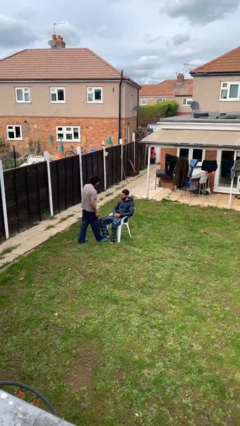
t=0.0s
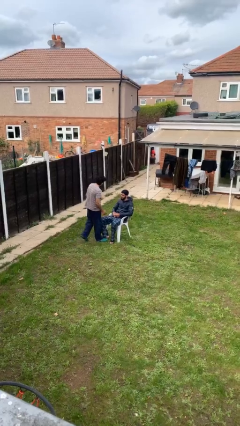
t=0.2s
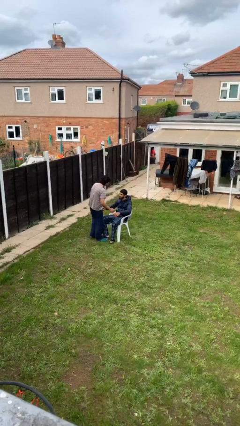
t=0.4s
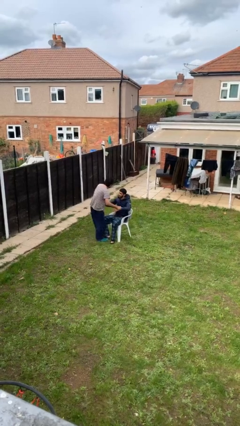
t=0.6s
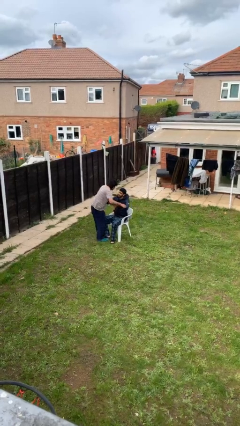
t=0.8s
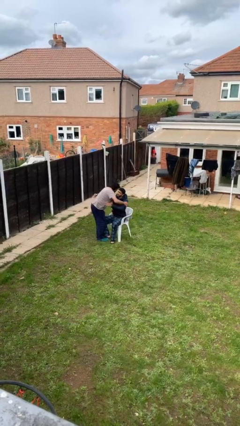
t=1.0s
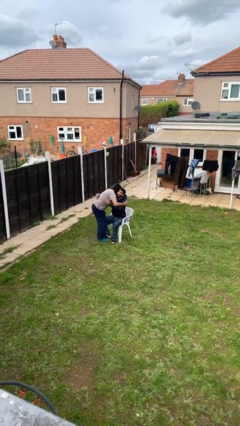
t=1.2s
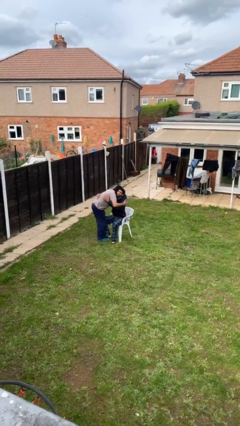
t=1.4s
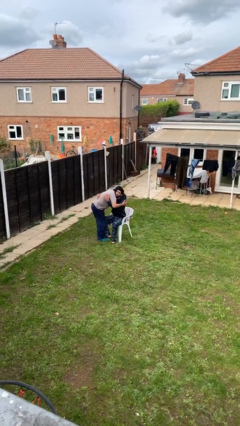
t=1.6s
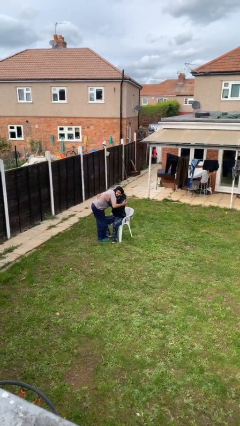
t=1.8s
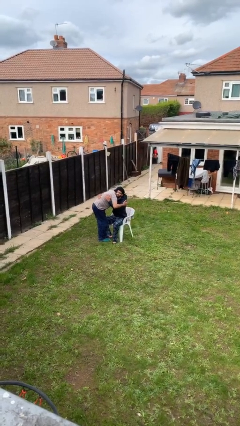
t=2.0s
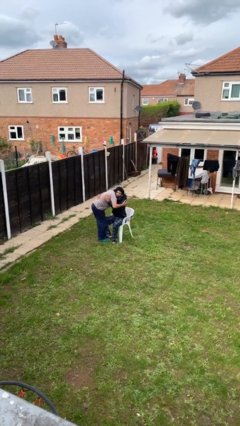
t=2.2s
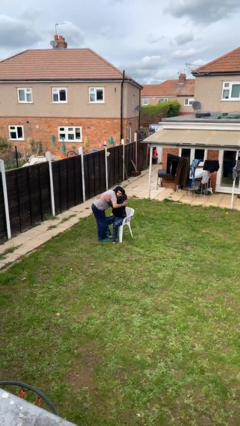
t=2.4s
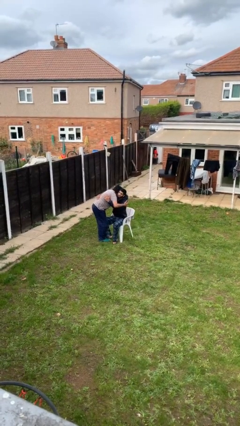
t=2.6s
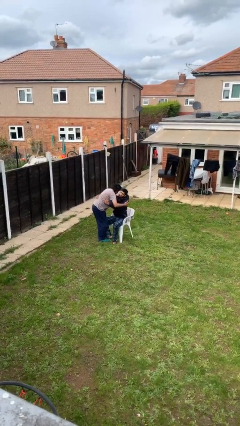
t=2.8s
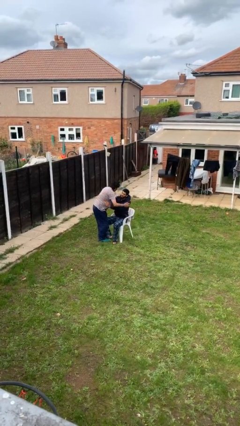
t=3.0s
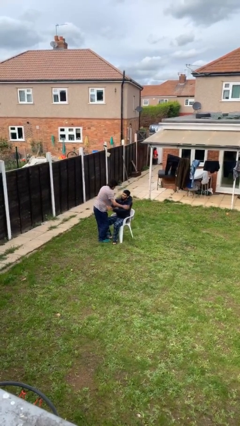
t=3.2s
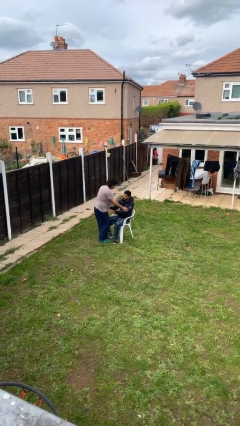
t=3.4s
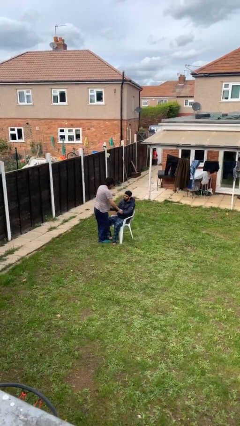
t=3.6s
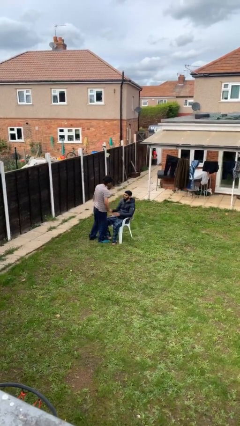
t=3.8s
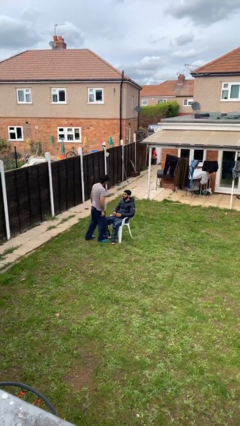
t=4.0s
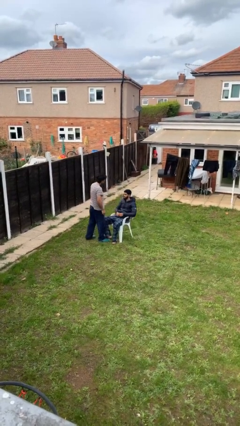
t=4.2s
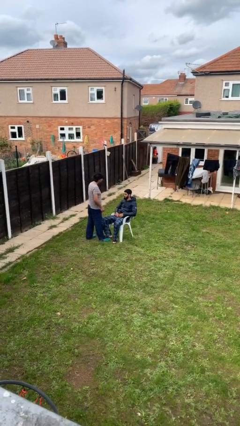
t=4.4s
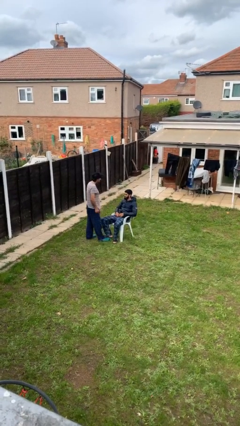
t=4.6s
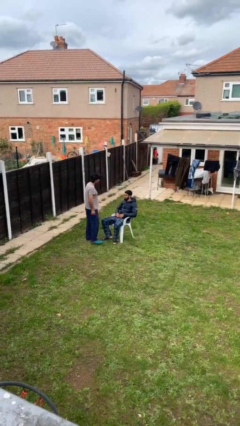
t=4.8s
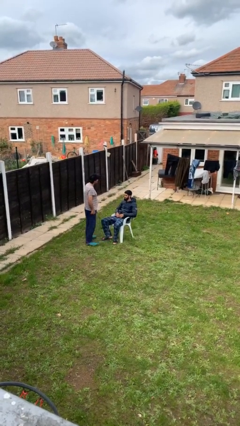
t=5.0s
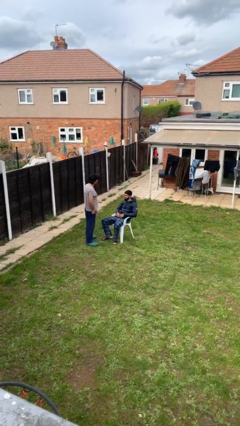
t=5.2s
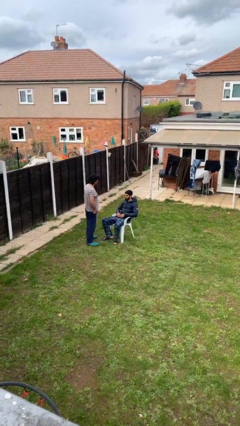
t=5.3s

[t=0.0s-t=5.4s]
person embraces person

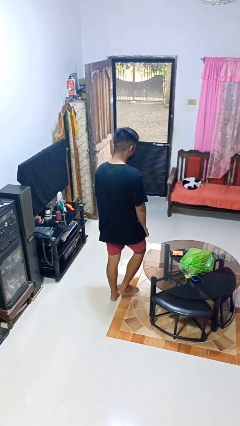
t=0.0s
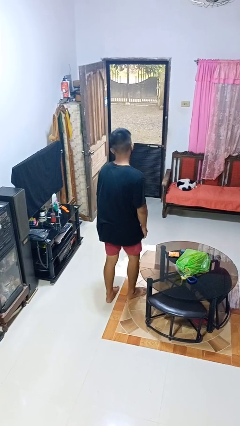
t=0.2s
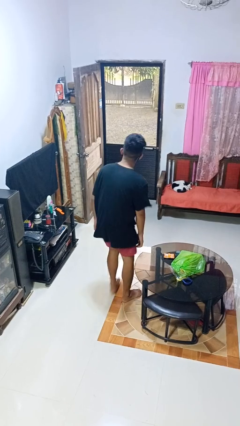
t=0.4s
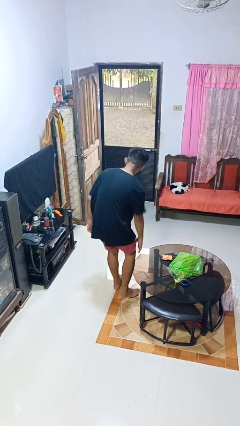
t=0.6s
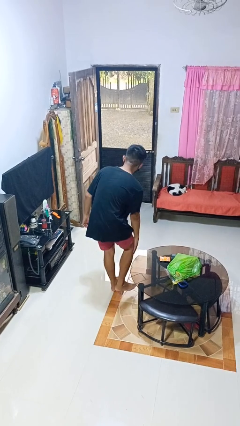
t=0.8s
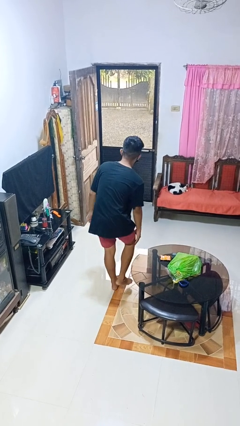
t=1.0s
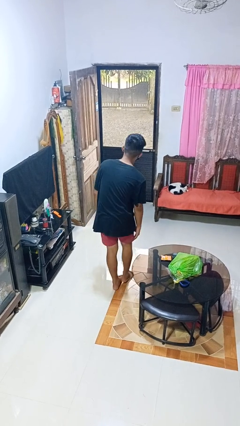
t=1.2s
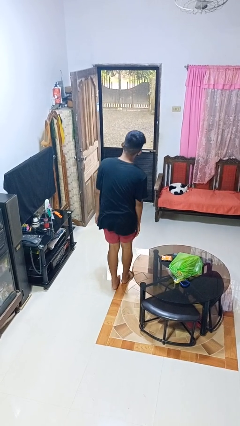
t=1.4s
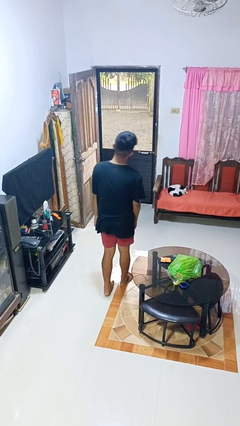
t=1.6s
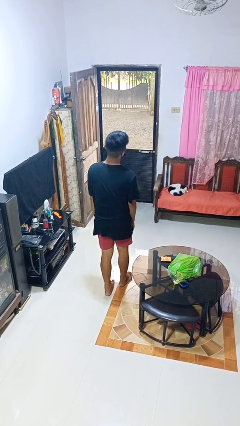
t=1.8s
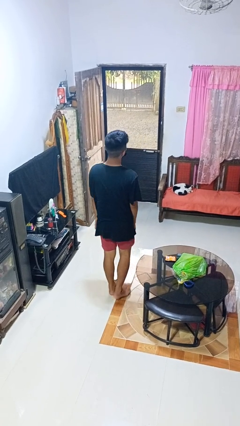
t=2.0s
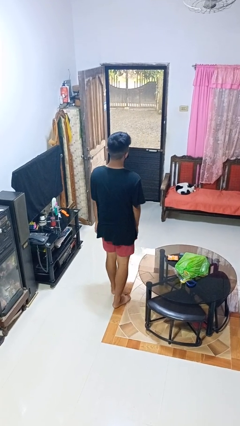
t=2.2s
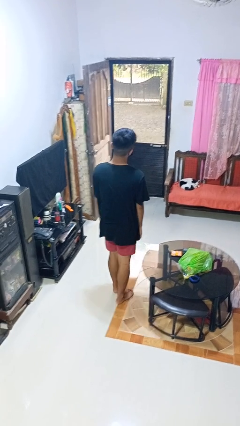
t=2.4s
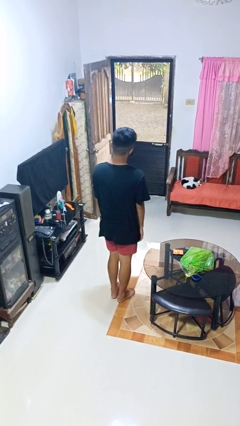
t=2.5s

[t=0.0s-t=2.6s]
person bumps into table

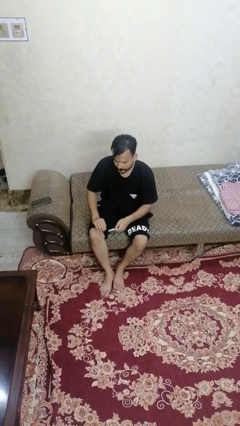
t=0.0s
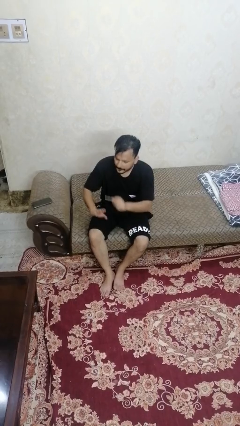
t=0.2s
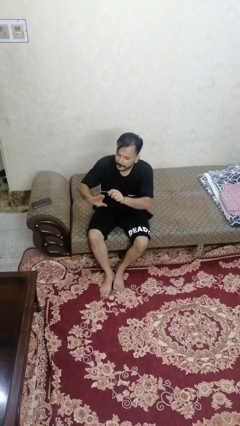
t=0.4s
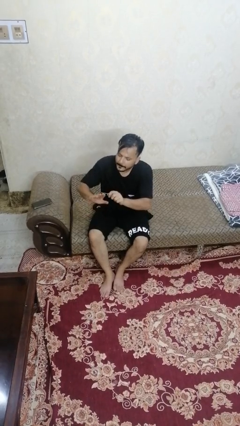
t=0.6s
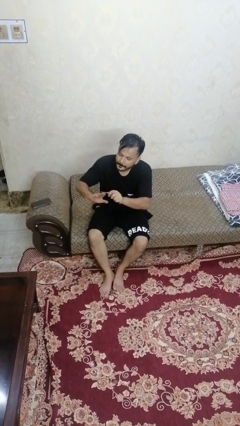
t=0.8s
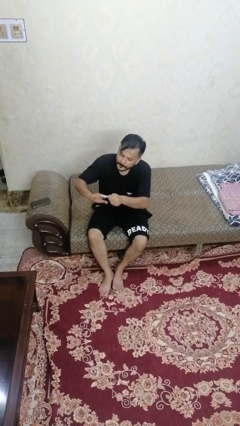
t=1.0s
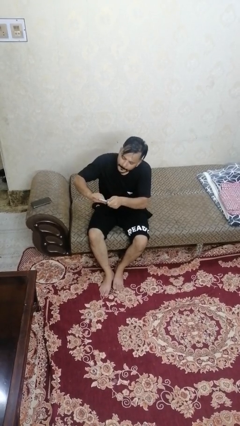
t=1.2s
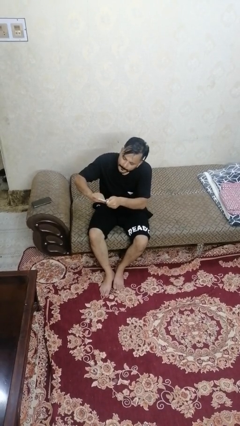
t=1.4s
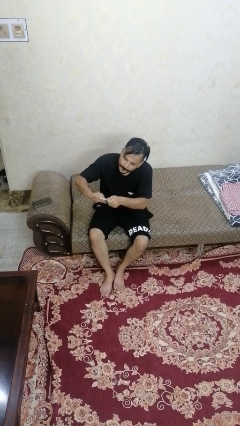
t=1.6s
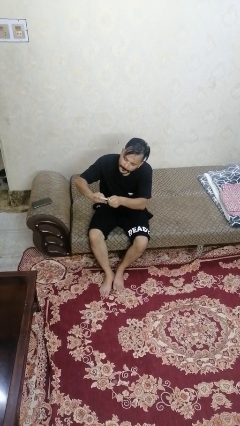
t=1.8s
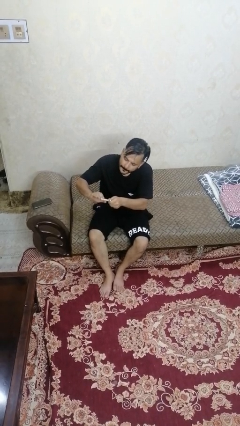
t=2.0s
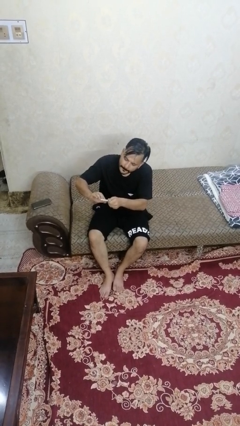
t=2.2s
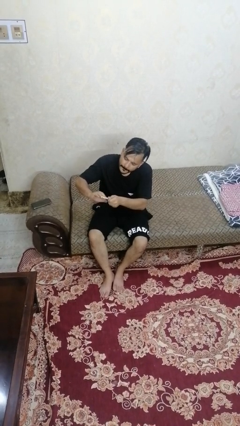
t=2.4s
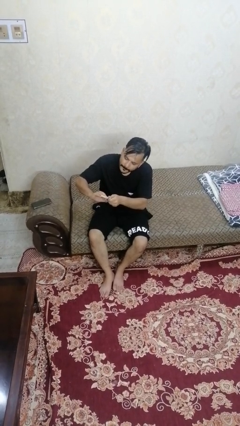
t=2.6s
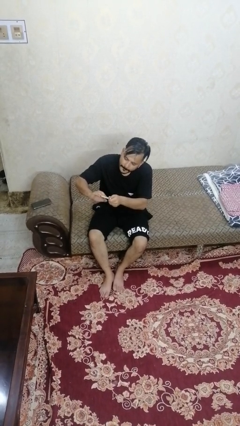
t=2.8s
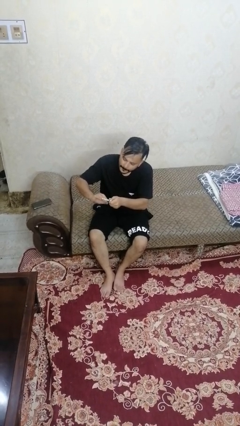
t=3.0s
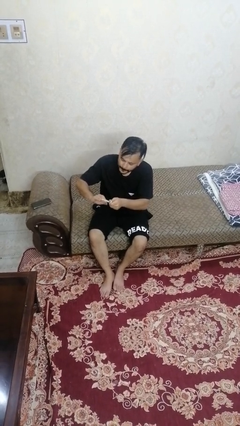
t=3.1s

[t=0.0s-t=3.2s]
person files fingernails

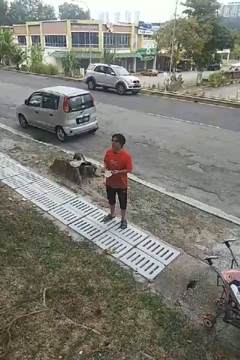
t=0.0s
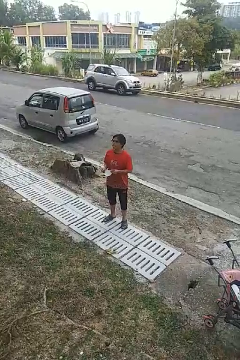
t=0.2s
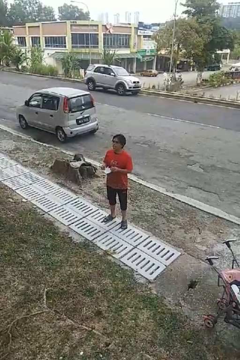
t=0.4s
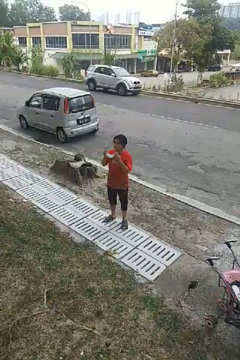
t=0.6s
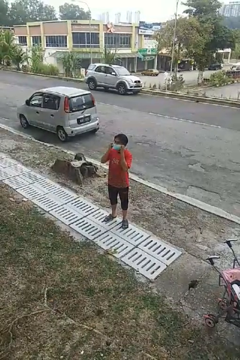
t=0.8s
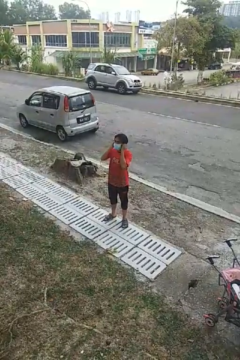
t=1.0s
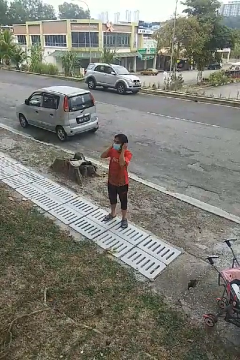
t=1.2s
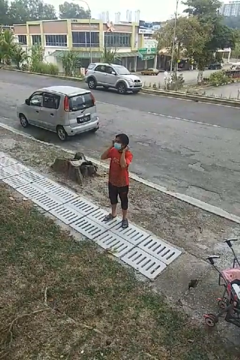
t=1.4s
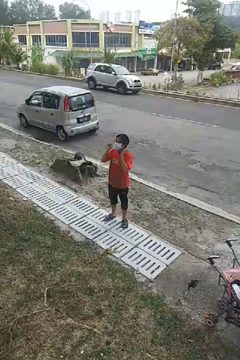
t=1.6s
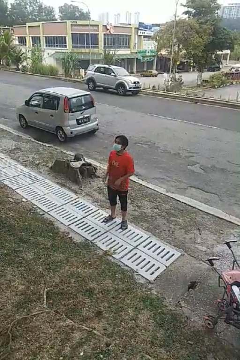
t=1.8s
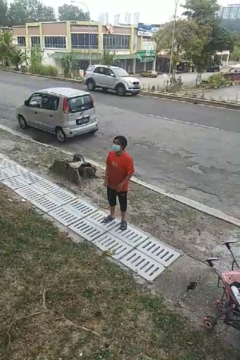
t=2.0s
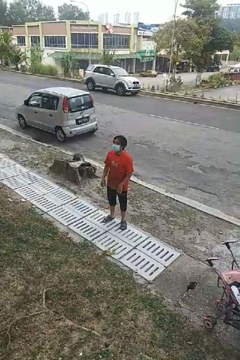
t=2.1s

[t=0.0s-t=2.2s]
person puts on facemask

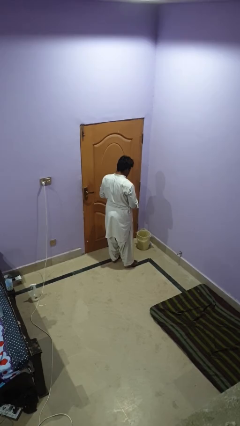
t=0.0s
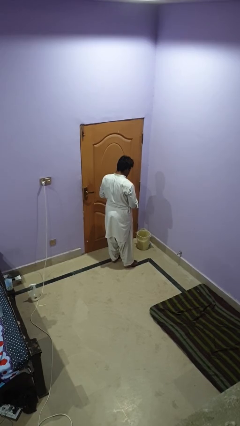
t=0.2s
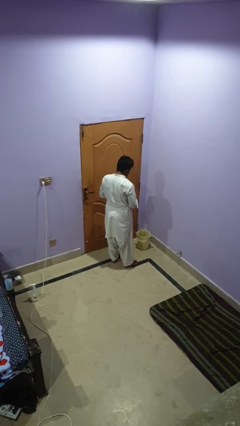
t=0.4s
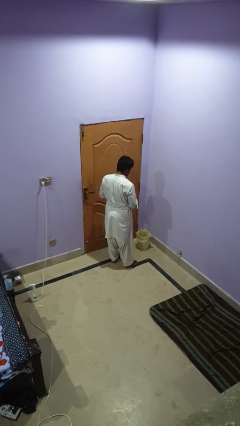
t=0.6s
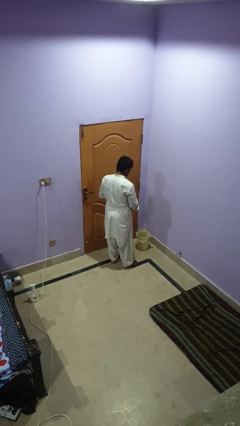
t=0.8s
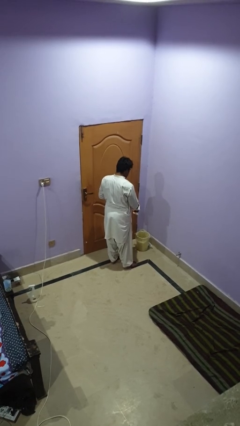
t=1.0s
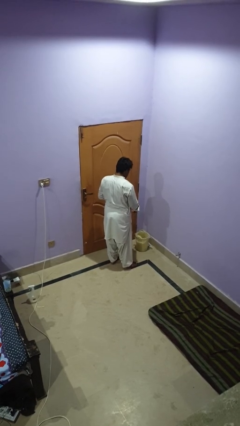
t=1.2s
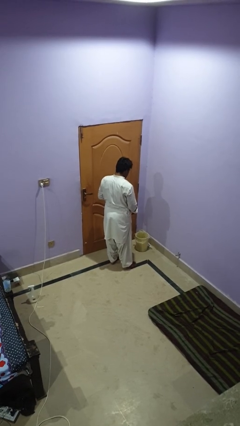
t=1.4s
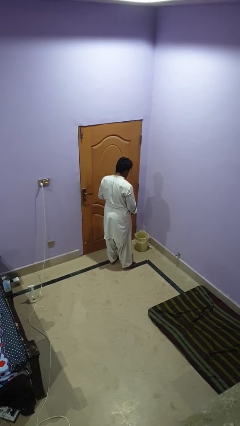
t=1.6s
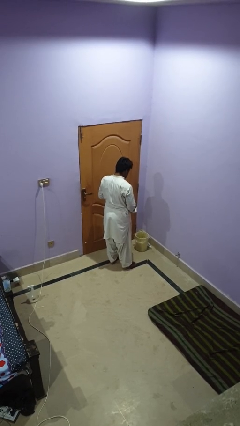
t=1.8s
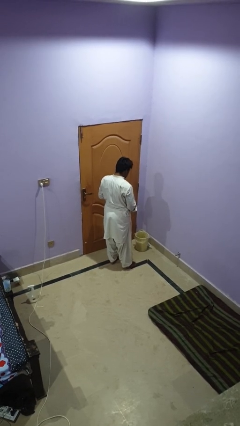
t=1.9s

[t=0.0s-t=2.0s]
person discards trash

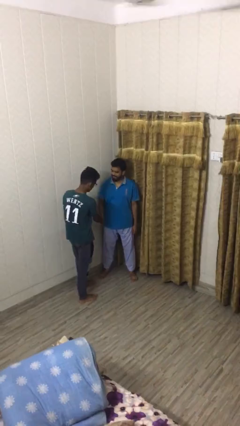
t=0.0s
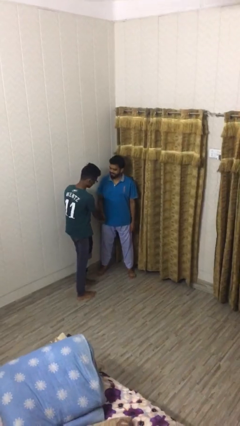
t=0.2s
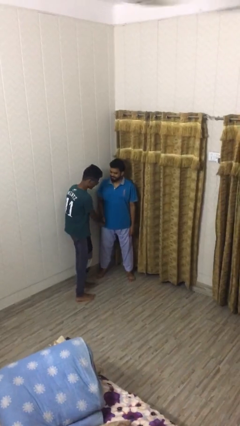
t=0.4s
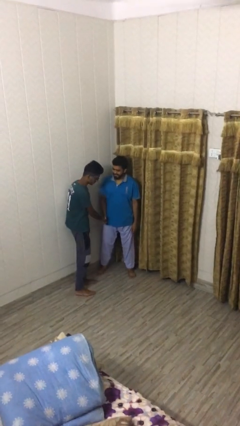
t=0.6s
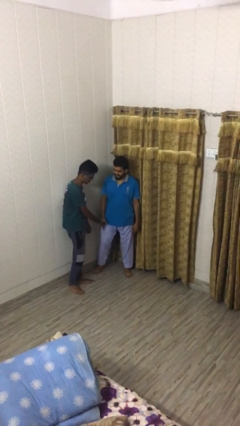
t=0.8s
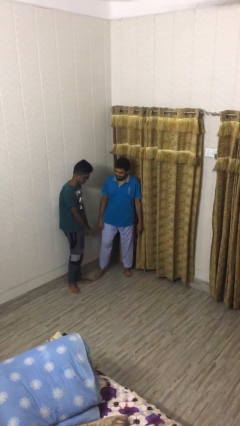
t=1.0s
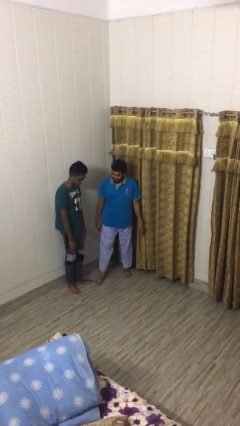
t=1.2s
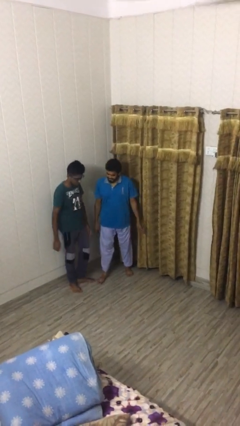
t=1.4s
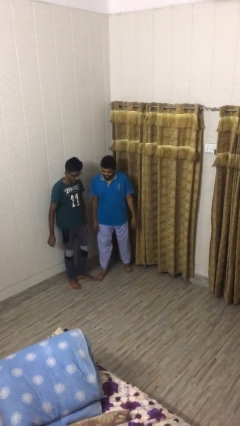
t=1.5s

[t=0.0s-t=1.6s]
person shakes hand

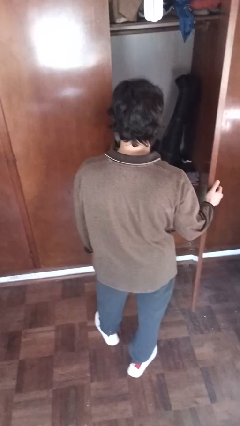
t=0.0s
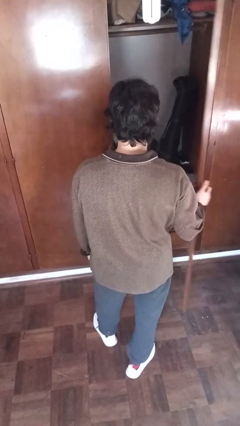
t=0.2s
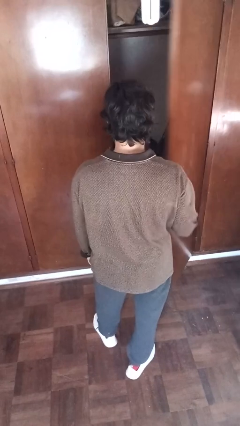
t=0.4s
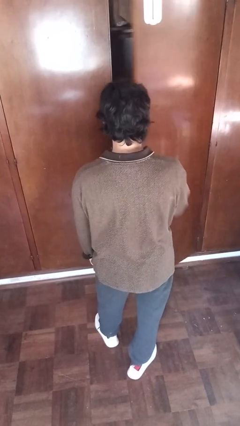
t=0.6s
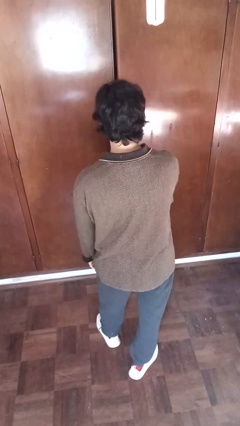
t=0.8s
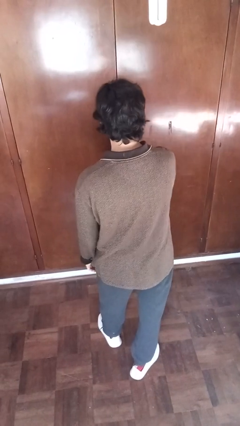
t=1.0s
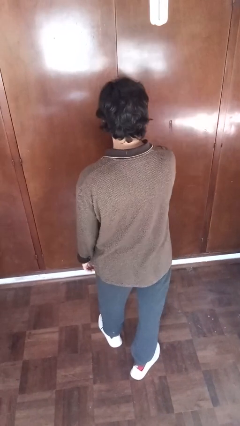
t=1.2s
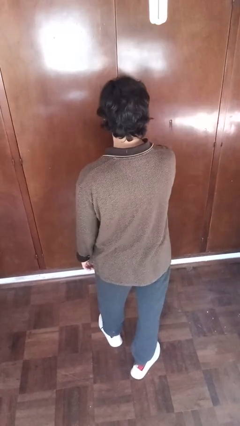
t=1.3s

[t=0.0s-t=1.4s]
person closes closet door
